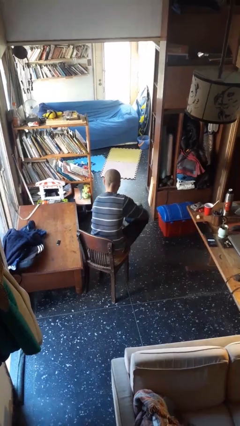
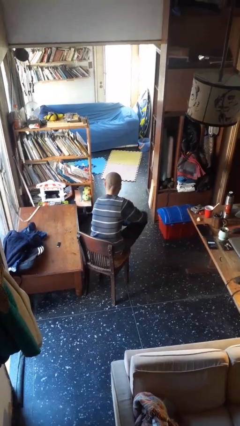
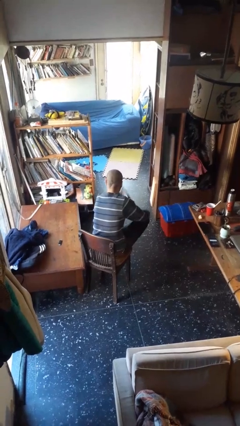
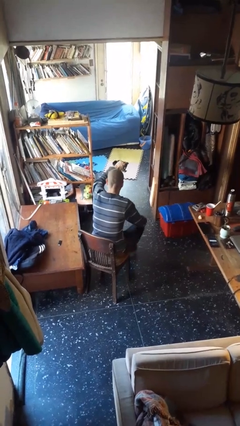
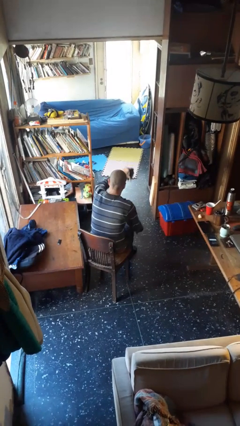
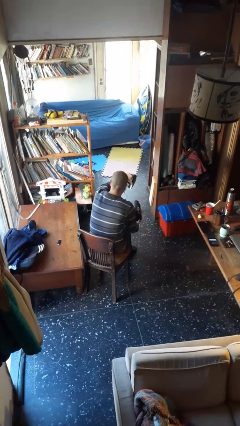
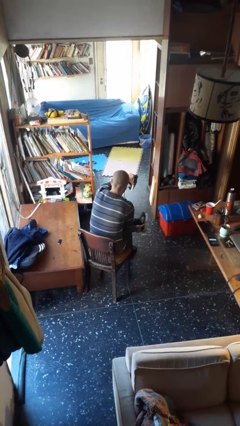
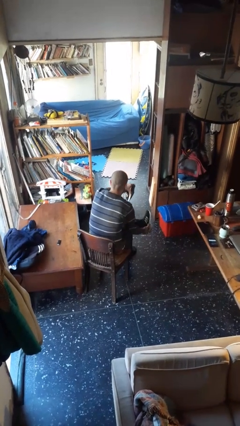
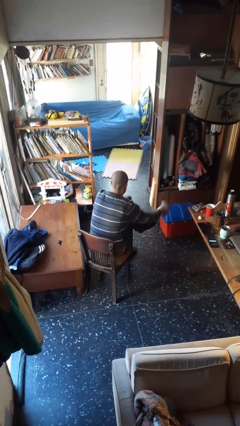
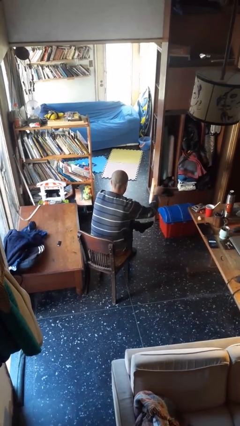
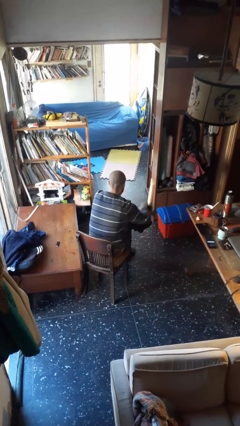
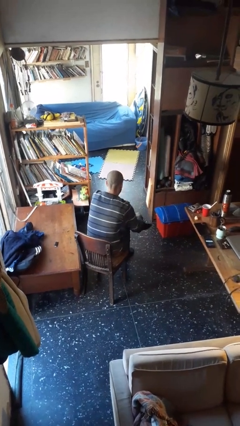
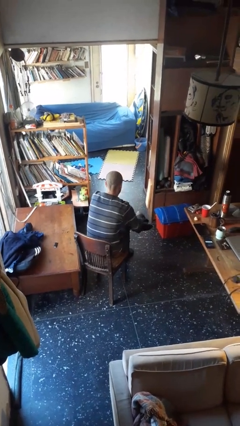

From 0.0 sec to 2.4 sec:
person takes off shoes

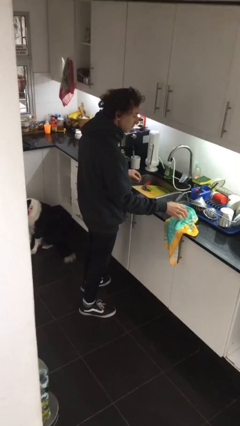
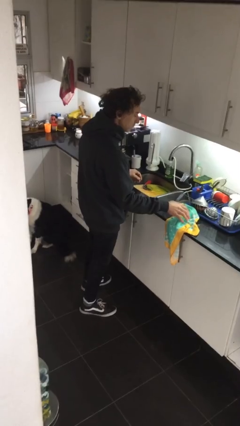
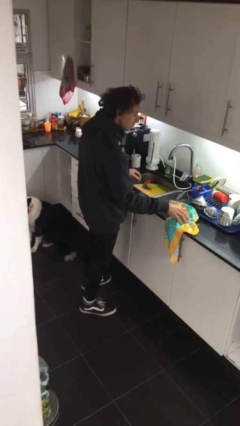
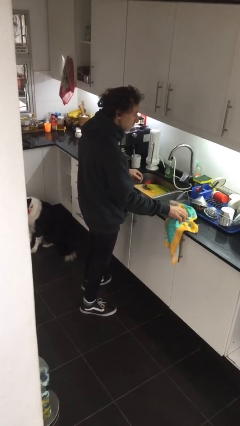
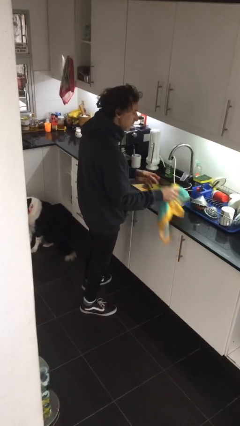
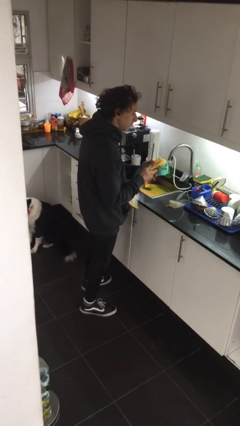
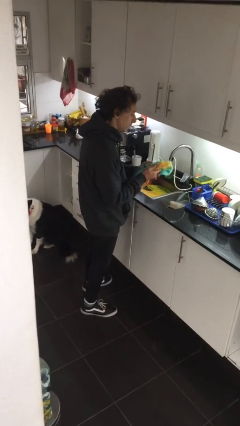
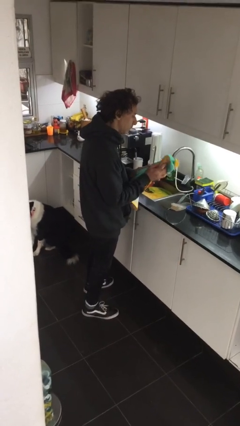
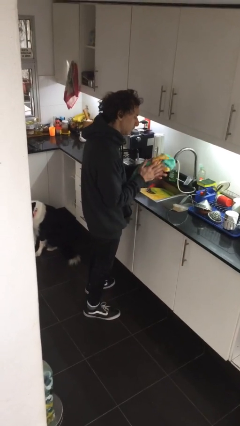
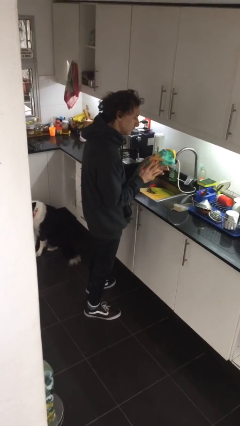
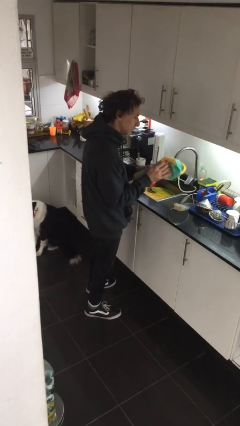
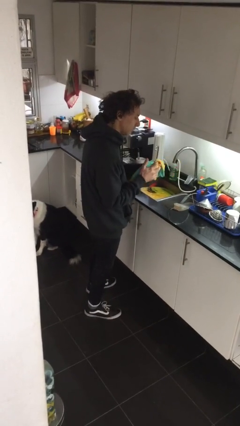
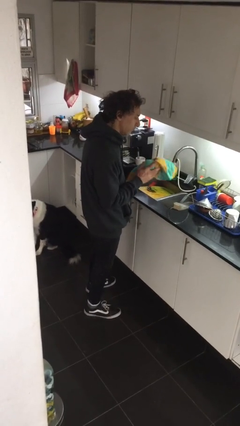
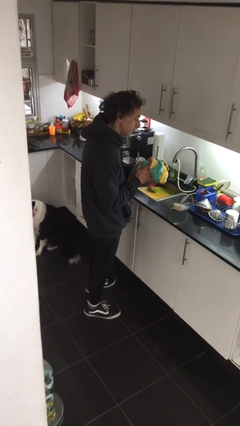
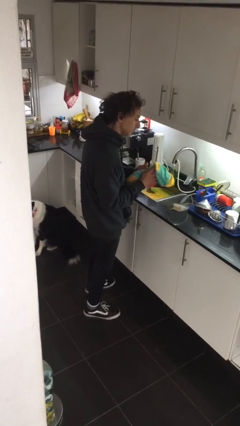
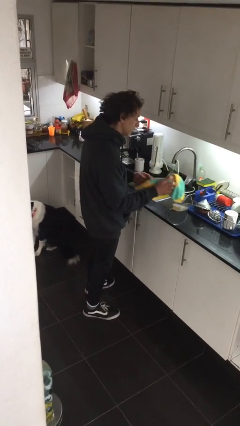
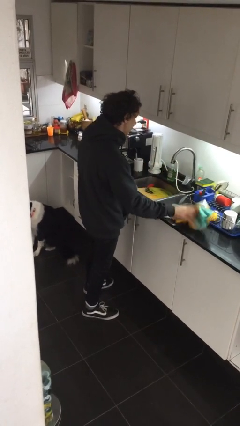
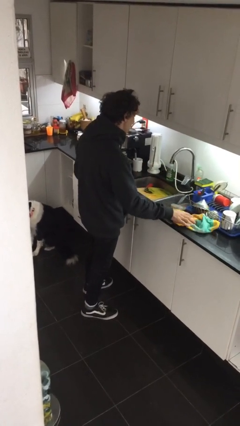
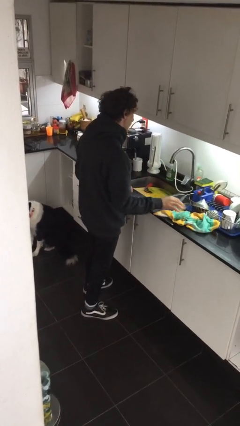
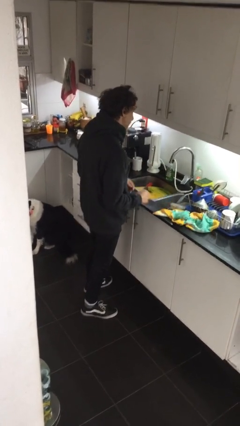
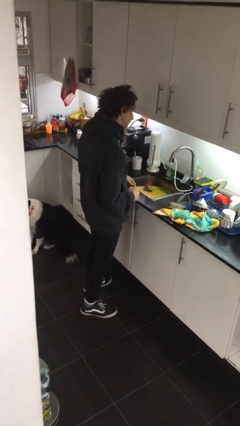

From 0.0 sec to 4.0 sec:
person dries hands with towel

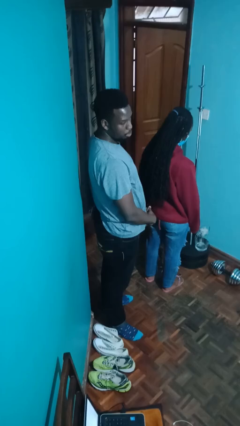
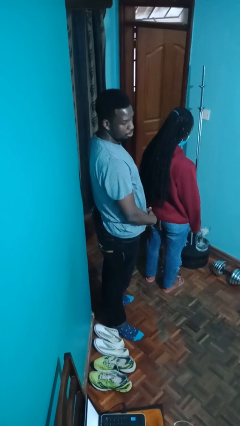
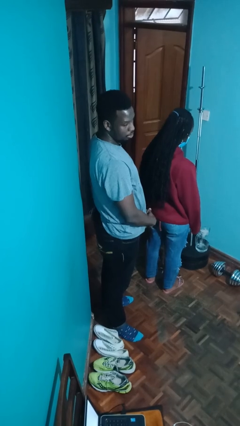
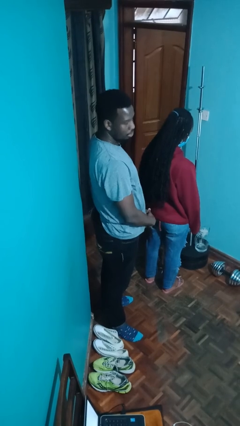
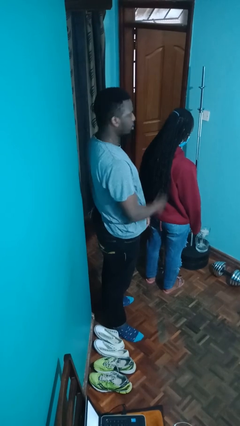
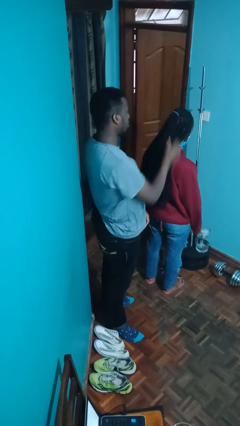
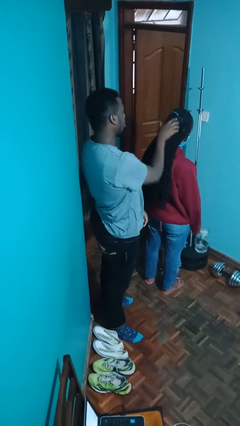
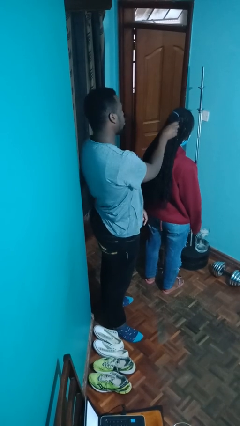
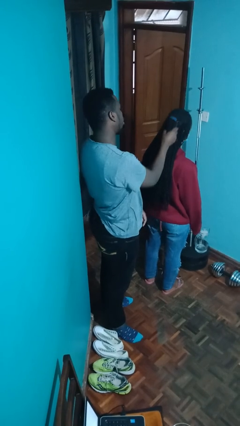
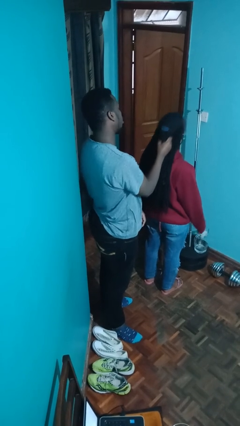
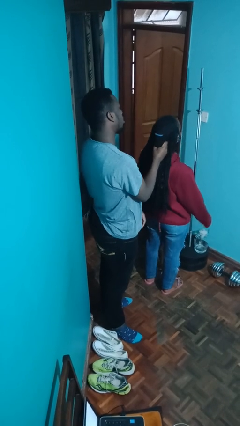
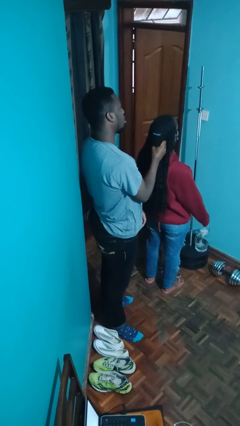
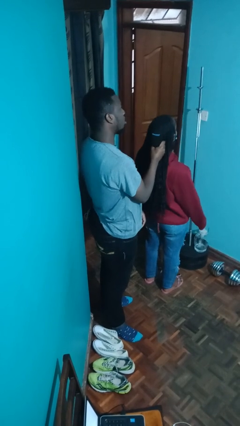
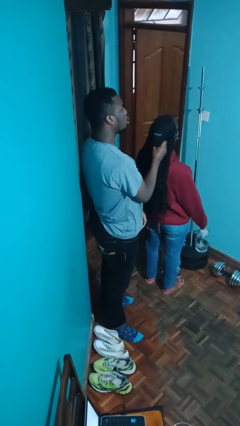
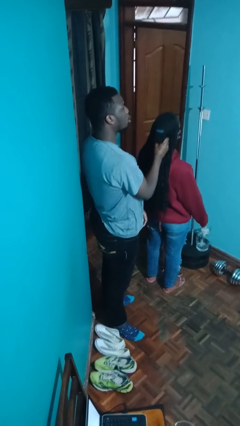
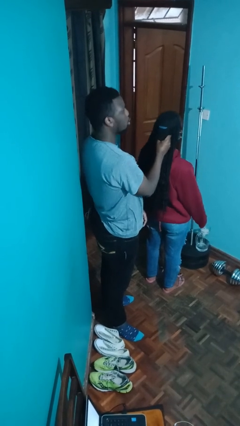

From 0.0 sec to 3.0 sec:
person grabs person by hair

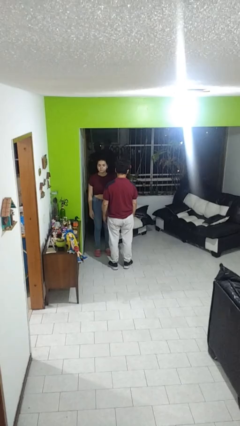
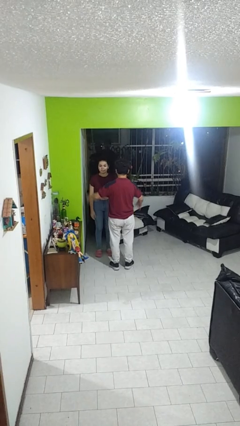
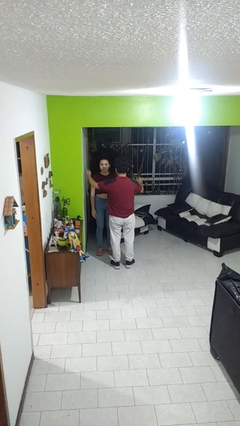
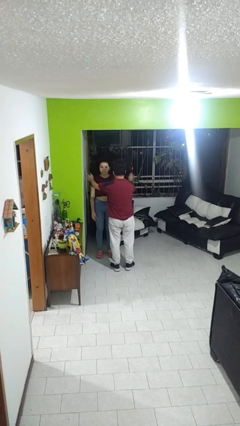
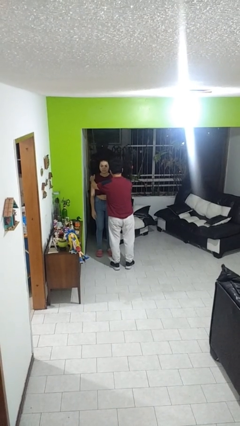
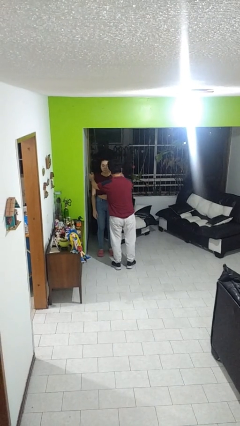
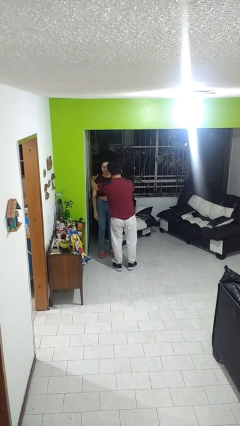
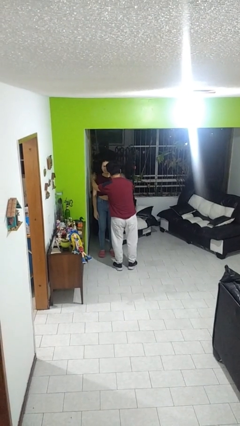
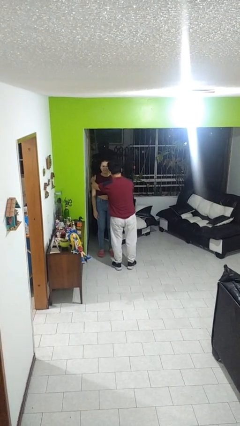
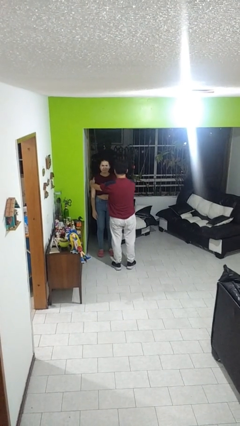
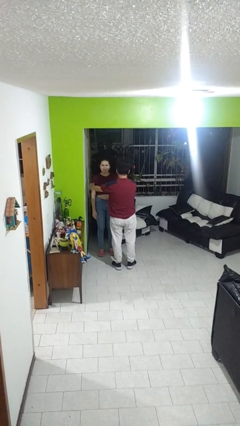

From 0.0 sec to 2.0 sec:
person pounds shoulders of person

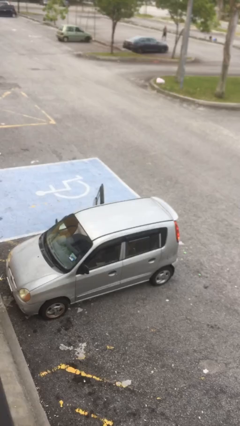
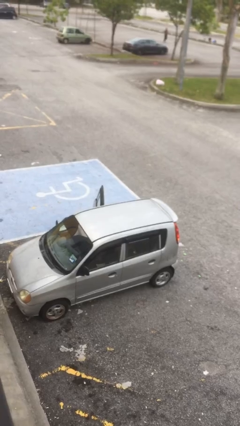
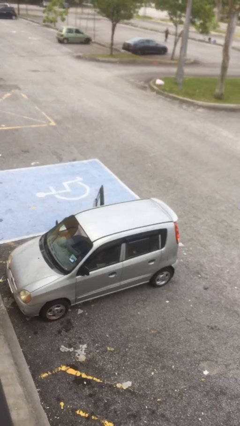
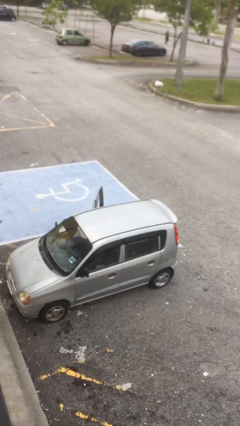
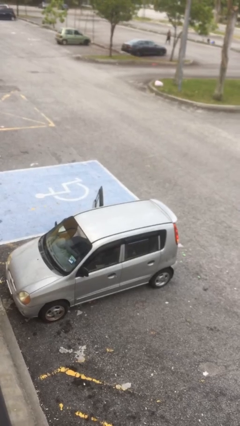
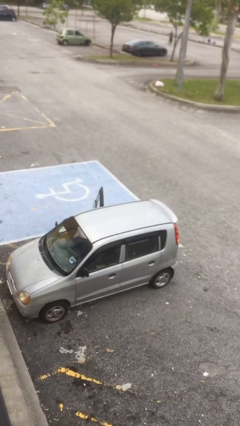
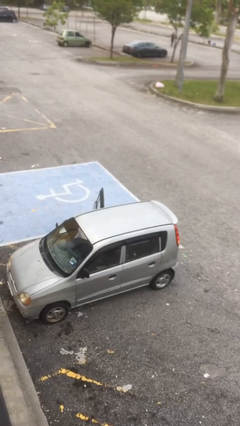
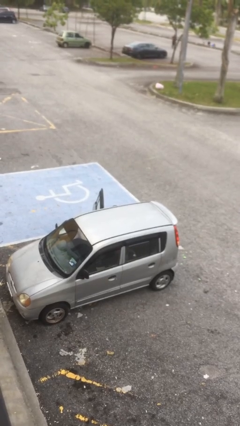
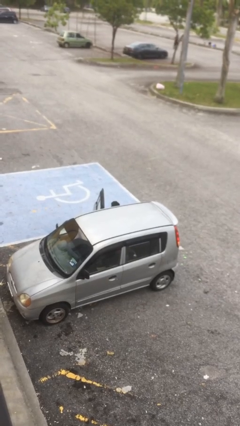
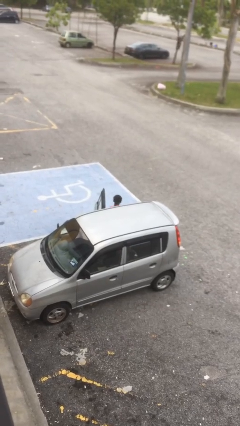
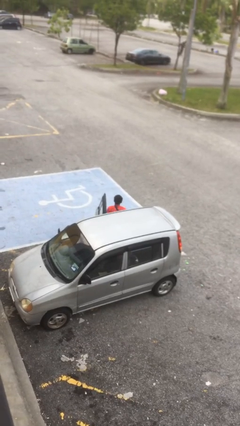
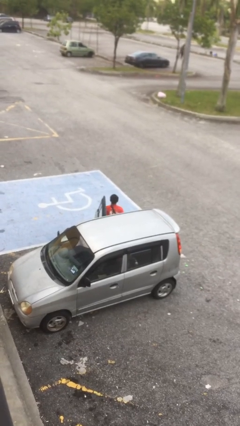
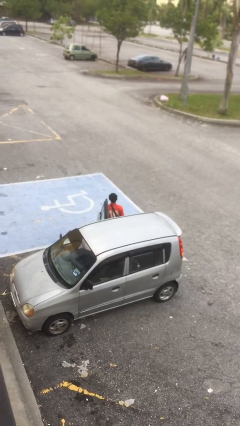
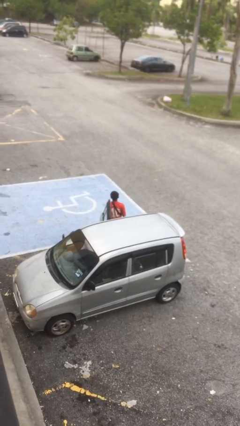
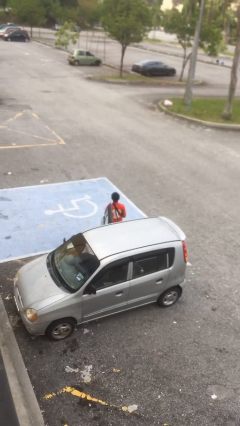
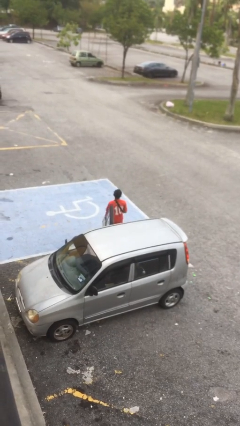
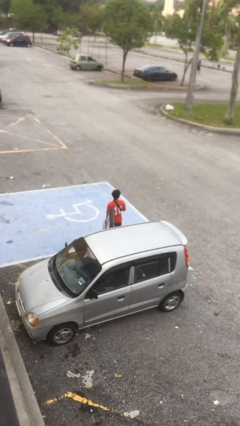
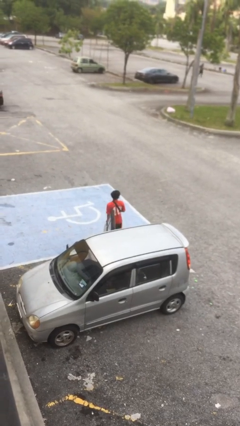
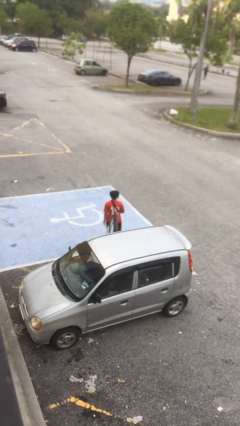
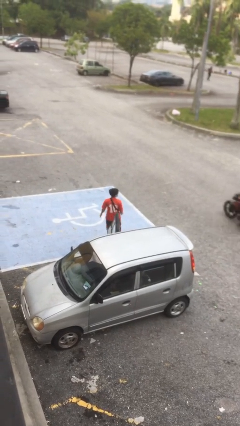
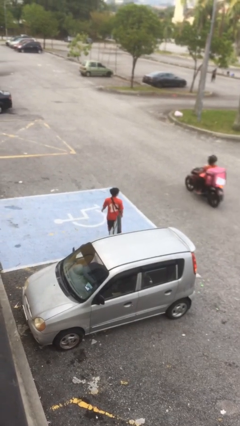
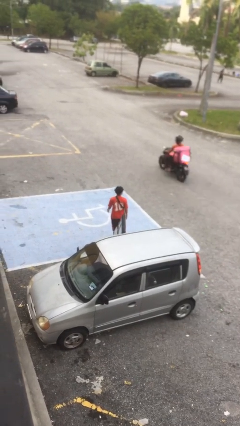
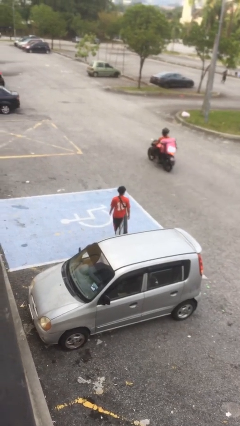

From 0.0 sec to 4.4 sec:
person exits car

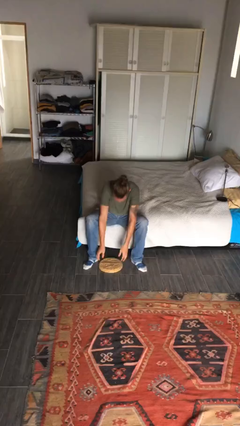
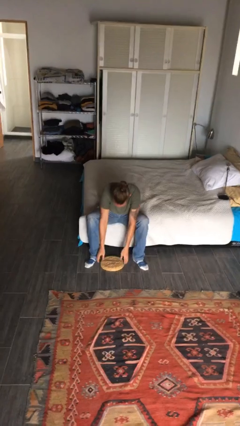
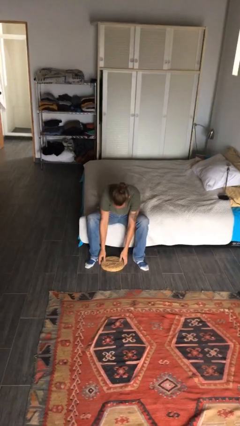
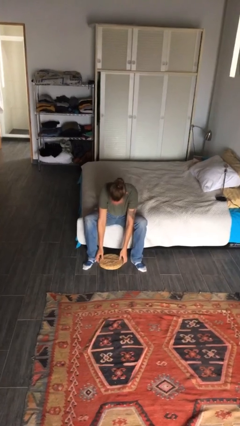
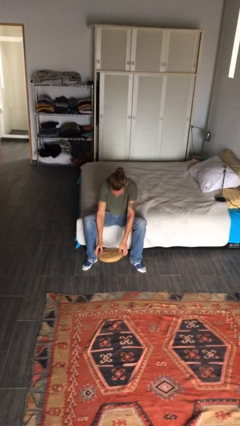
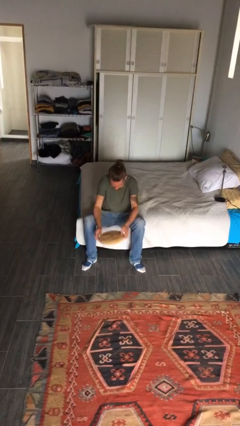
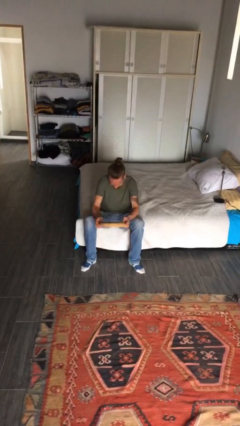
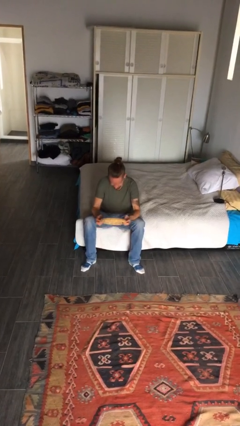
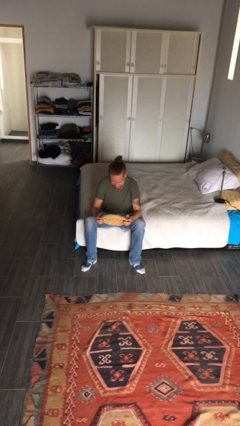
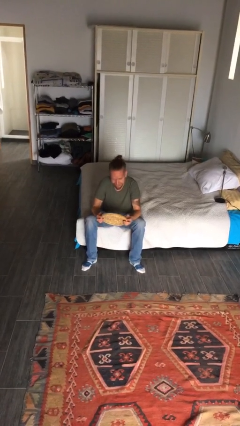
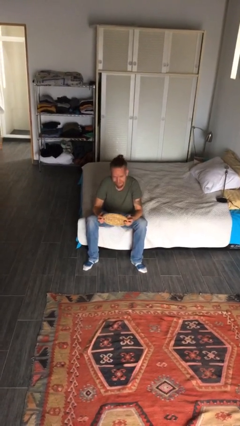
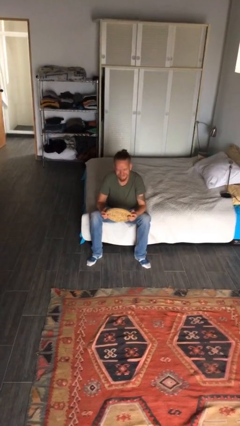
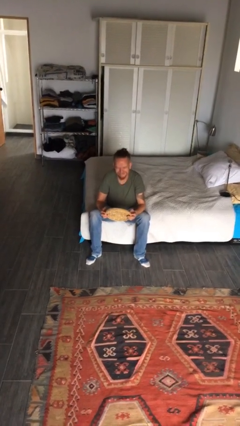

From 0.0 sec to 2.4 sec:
person picks up object from floor
